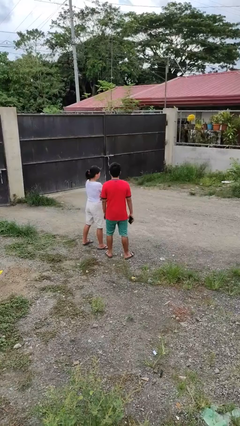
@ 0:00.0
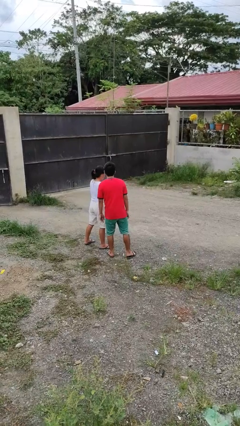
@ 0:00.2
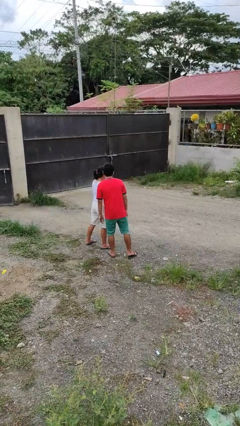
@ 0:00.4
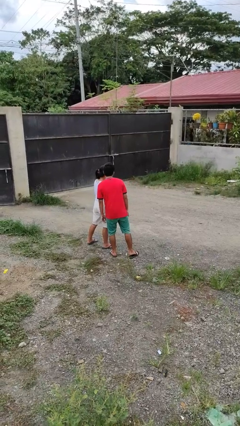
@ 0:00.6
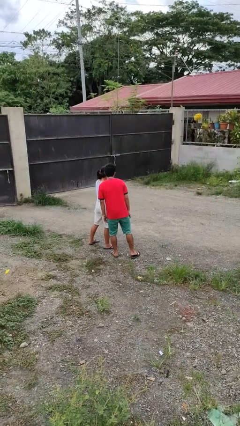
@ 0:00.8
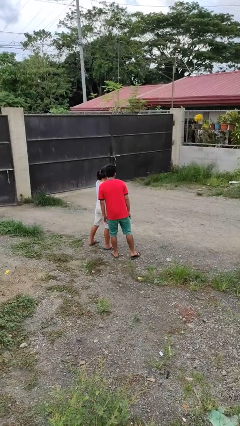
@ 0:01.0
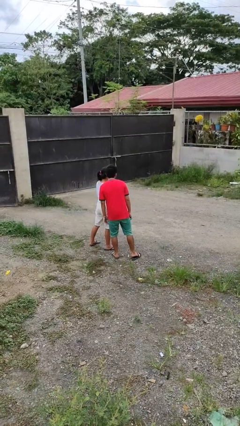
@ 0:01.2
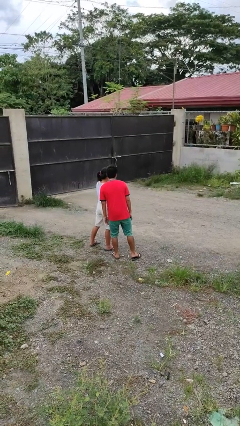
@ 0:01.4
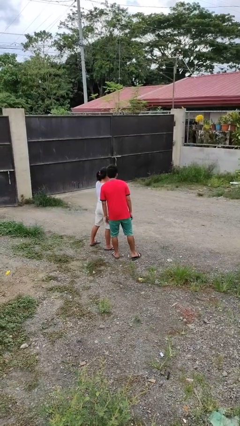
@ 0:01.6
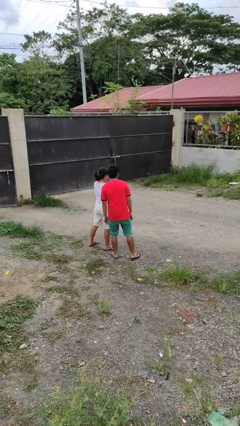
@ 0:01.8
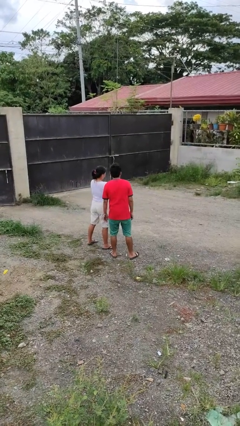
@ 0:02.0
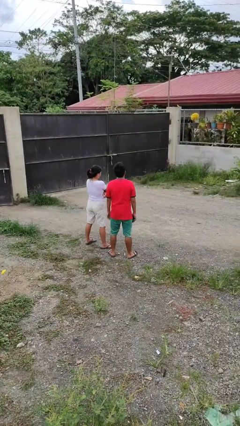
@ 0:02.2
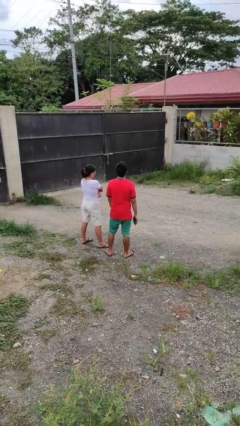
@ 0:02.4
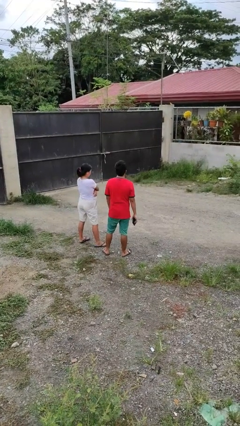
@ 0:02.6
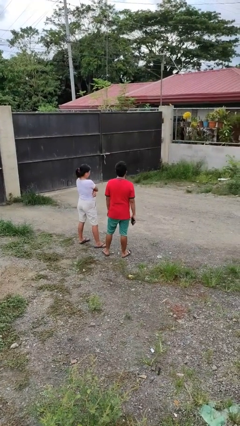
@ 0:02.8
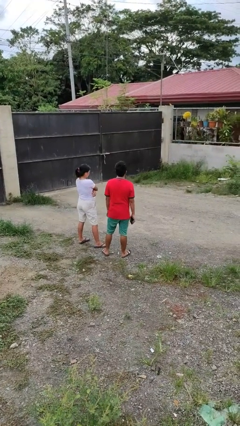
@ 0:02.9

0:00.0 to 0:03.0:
person kisses cheek of person

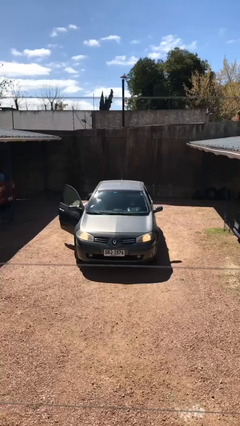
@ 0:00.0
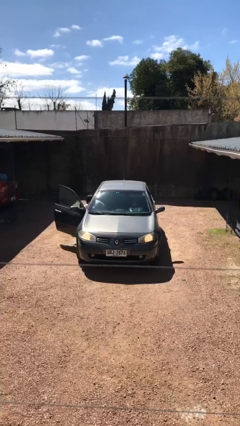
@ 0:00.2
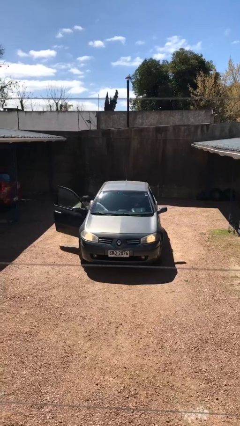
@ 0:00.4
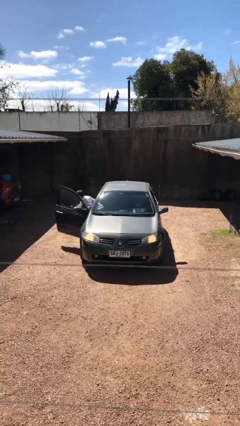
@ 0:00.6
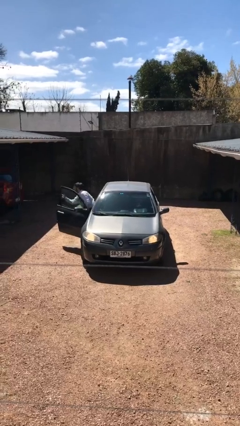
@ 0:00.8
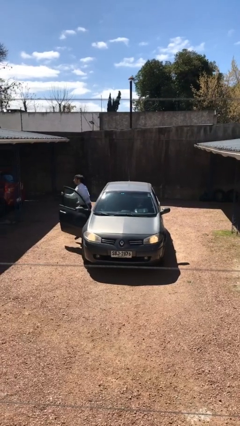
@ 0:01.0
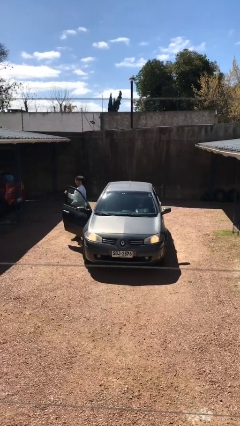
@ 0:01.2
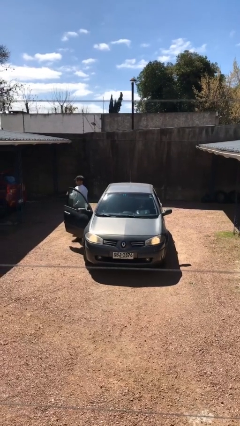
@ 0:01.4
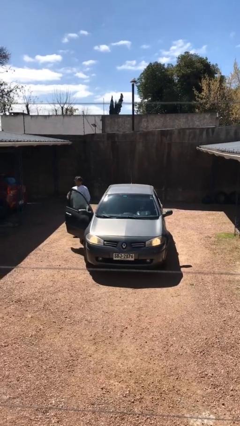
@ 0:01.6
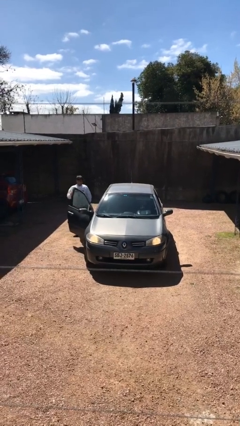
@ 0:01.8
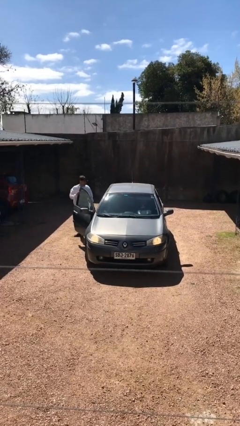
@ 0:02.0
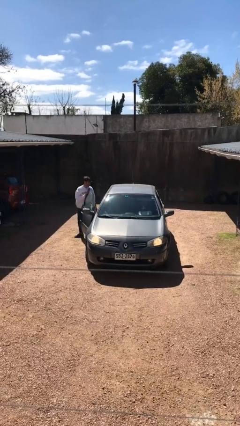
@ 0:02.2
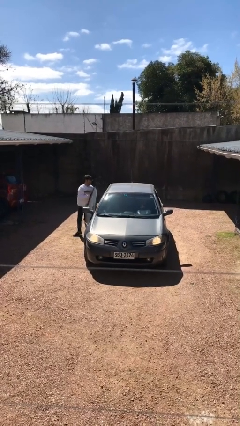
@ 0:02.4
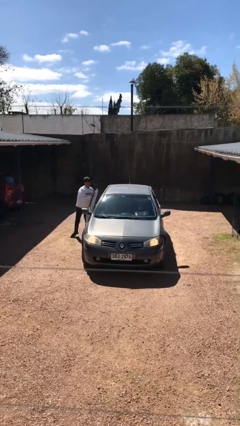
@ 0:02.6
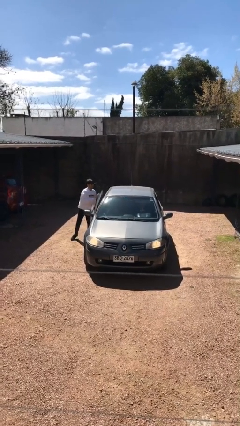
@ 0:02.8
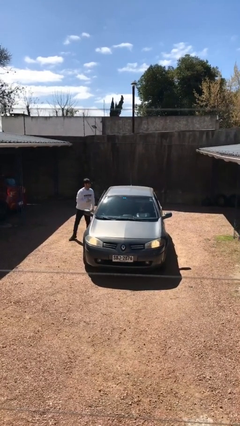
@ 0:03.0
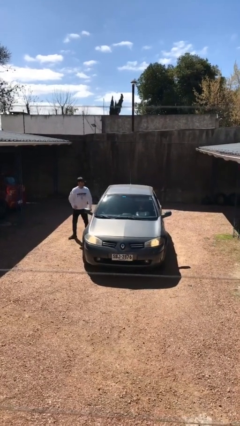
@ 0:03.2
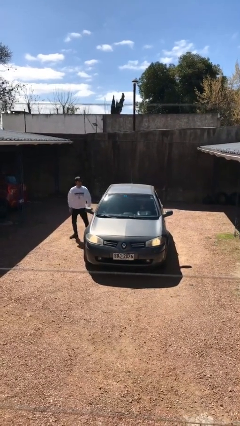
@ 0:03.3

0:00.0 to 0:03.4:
car drops off person

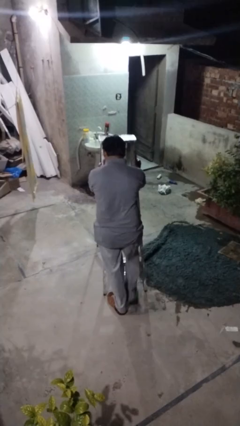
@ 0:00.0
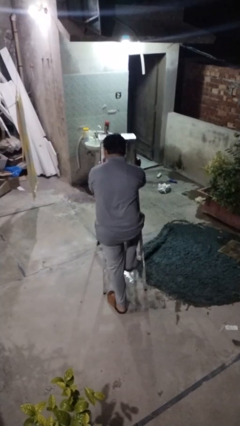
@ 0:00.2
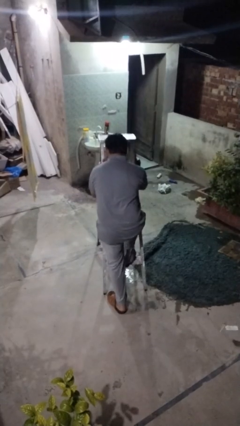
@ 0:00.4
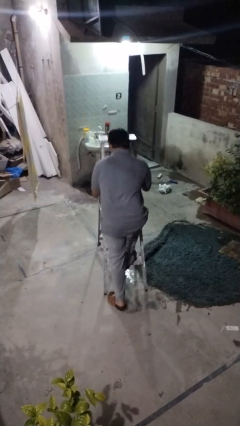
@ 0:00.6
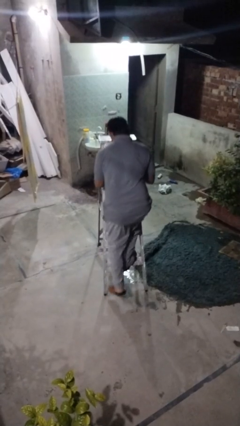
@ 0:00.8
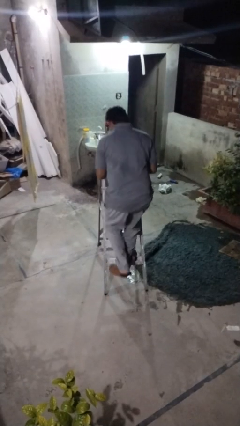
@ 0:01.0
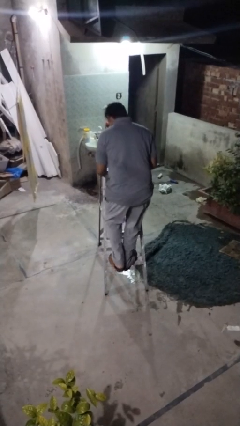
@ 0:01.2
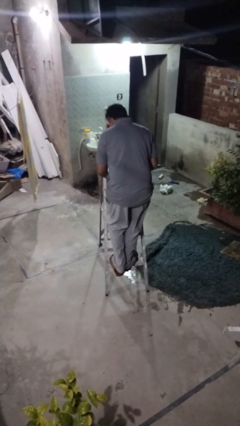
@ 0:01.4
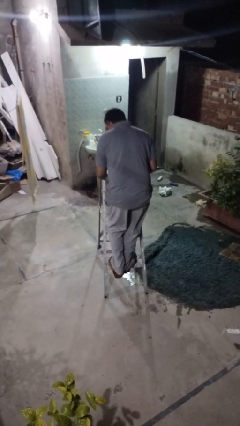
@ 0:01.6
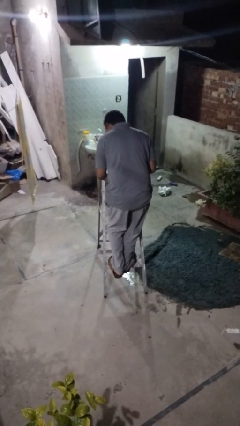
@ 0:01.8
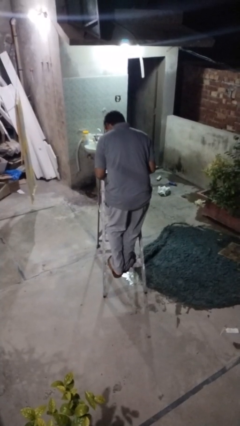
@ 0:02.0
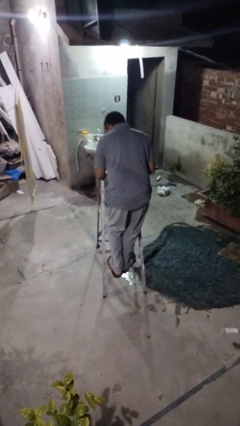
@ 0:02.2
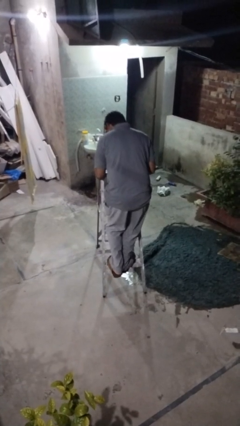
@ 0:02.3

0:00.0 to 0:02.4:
person climbs up ladder

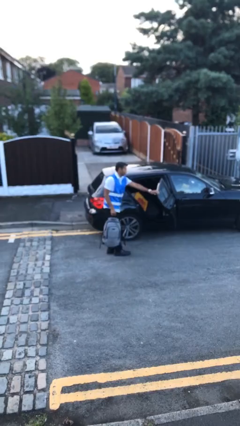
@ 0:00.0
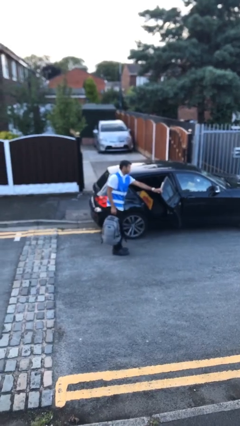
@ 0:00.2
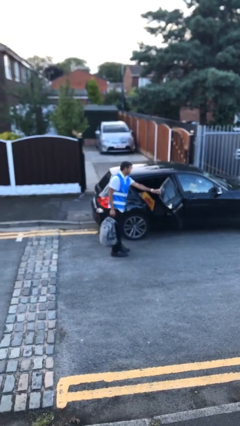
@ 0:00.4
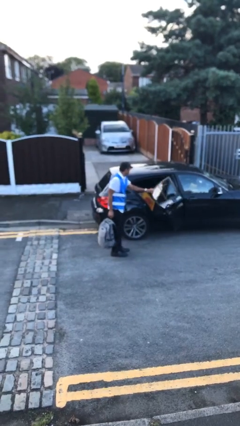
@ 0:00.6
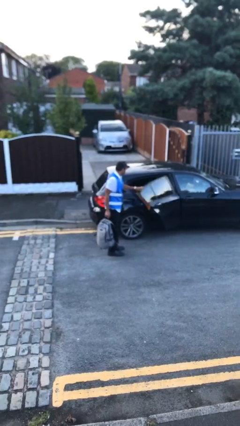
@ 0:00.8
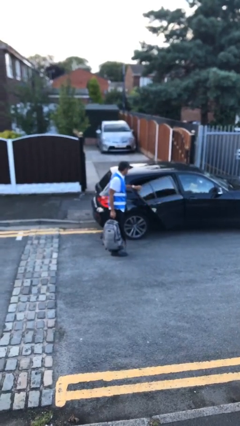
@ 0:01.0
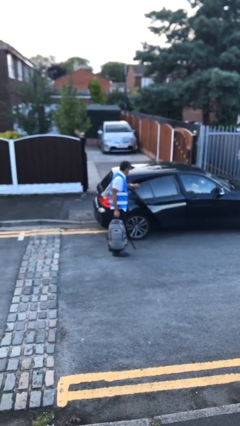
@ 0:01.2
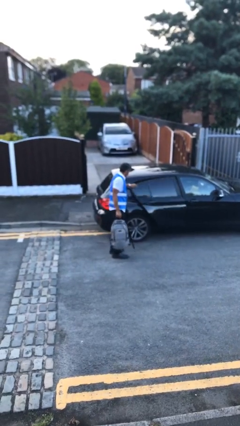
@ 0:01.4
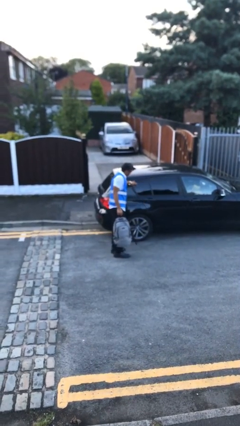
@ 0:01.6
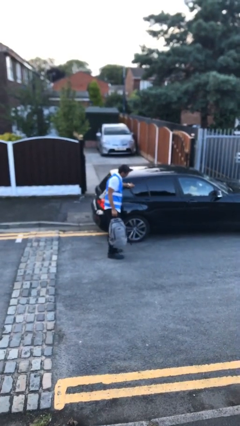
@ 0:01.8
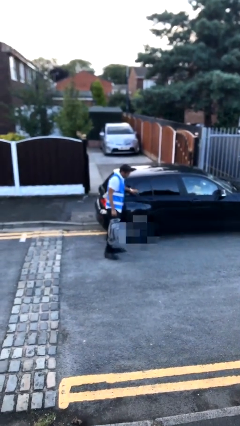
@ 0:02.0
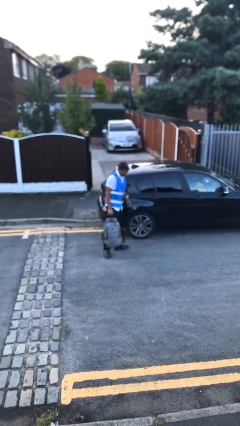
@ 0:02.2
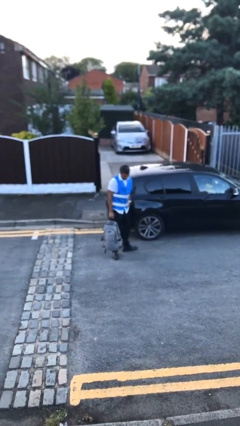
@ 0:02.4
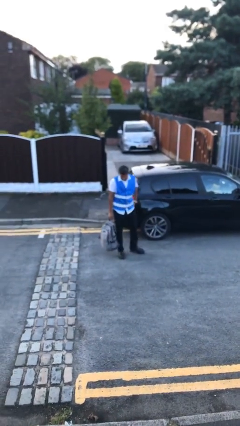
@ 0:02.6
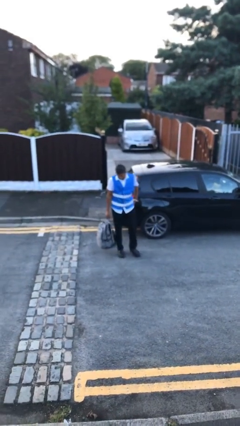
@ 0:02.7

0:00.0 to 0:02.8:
person closes car door

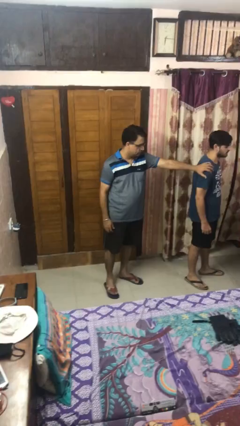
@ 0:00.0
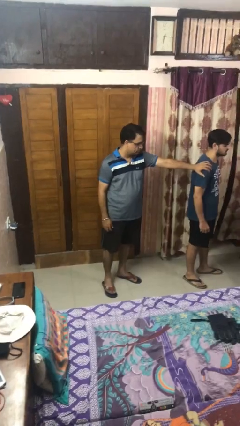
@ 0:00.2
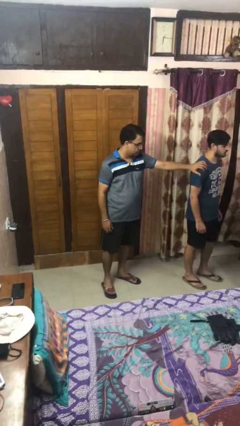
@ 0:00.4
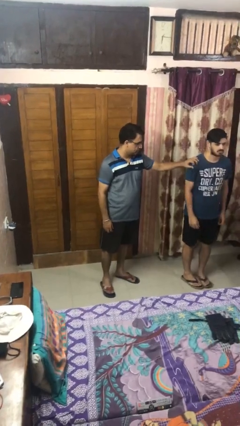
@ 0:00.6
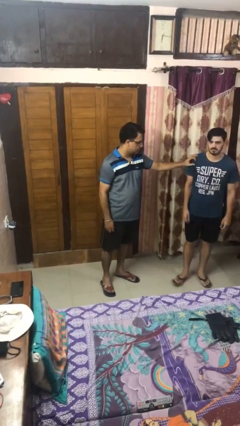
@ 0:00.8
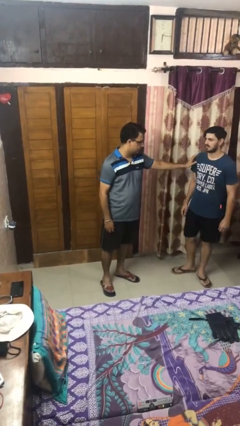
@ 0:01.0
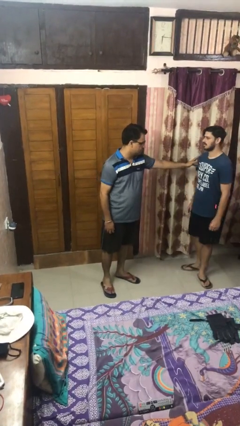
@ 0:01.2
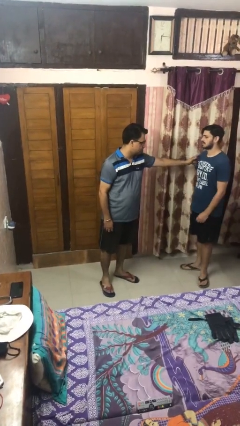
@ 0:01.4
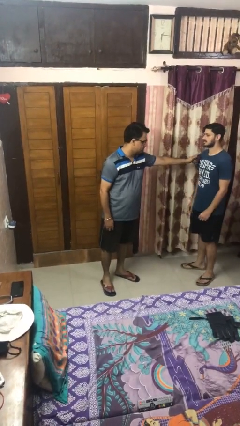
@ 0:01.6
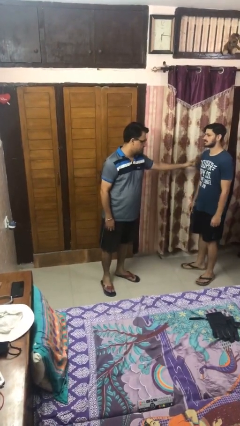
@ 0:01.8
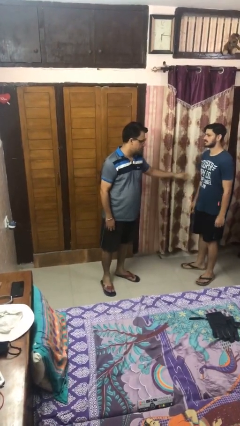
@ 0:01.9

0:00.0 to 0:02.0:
person spins person around

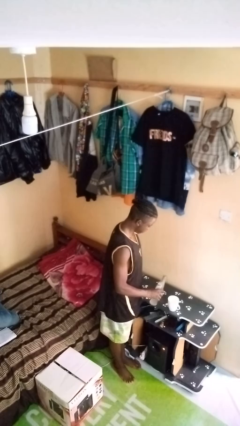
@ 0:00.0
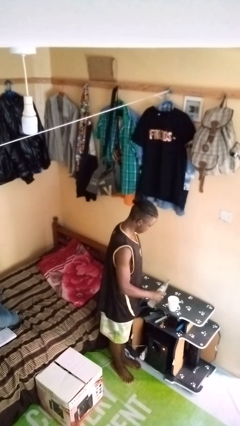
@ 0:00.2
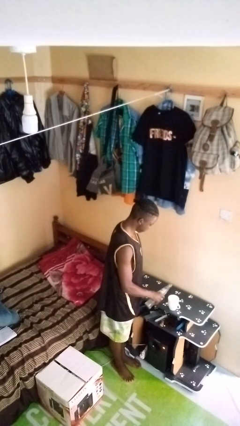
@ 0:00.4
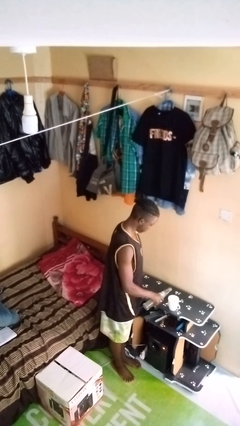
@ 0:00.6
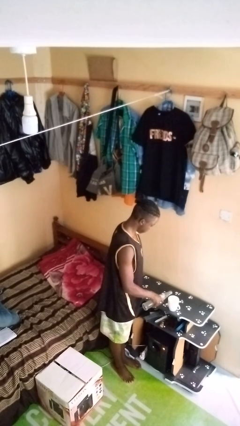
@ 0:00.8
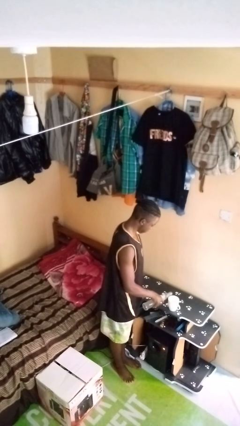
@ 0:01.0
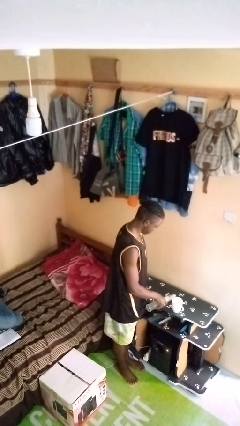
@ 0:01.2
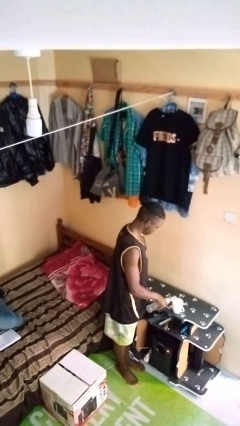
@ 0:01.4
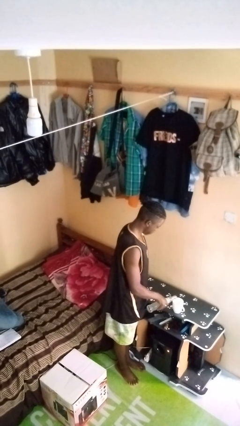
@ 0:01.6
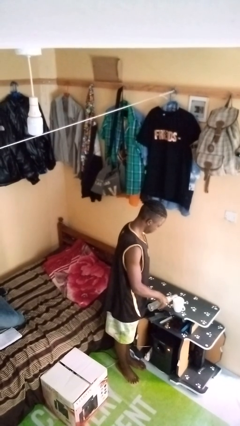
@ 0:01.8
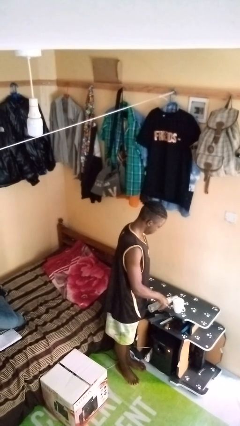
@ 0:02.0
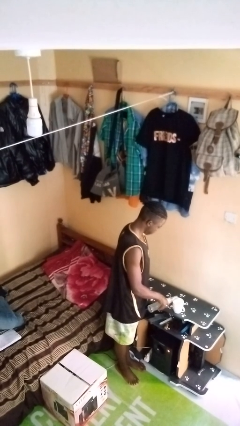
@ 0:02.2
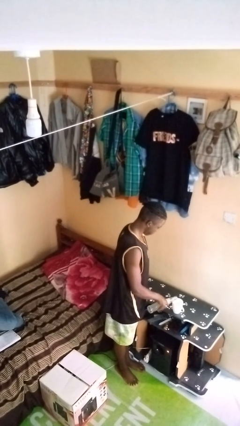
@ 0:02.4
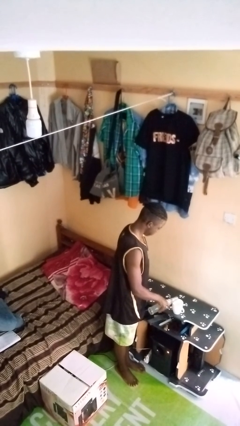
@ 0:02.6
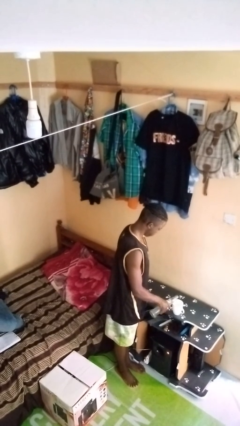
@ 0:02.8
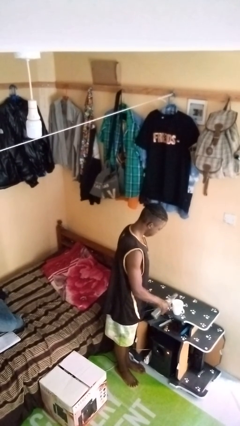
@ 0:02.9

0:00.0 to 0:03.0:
person pours liquid into cup

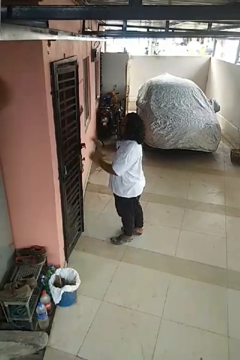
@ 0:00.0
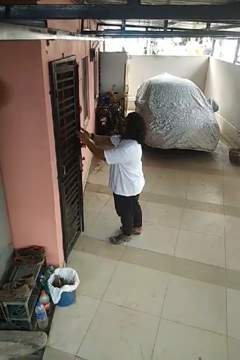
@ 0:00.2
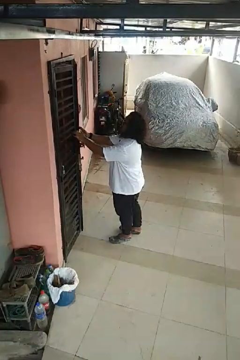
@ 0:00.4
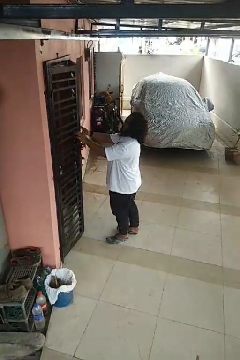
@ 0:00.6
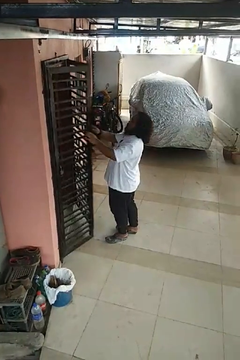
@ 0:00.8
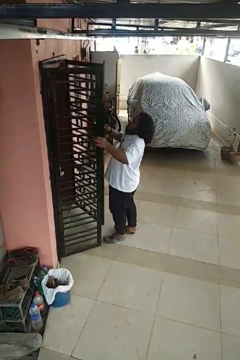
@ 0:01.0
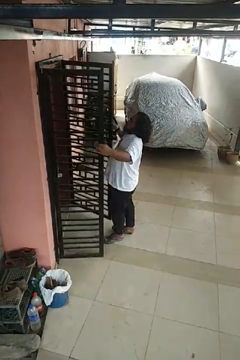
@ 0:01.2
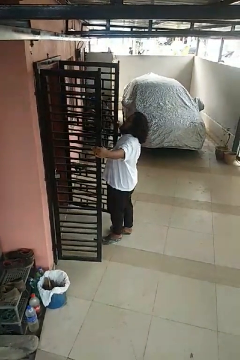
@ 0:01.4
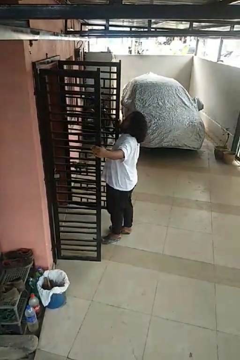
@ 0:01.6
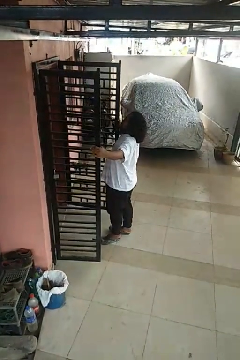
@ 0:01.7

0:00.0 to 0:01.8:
person opens gate
